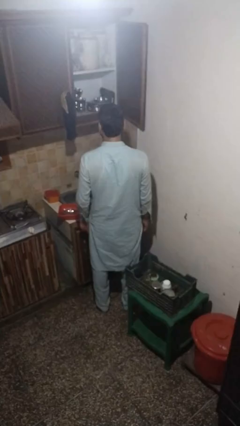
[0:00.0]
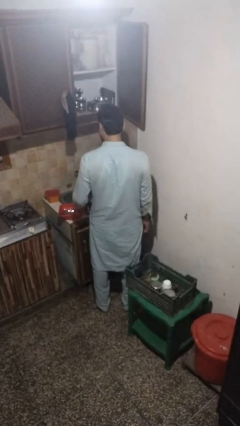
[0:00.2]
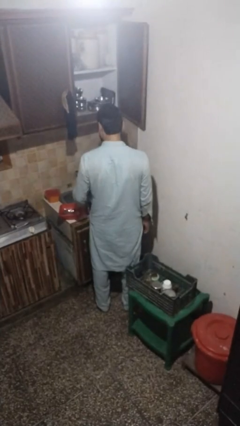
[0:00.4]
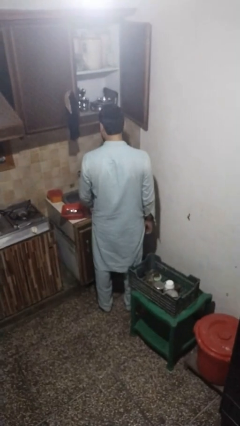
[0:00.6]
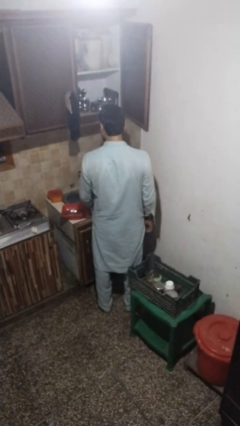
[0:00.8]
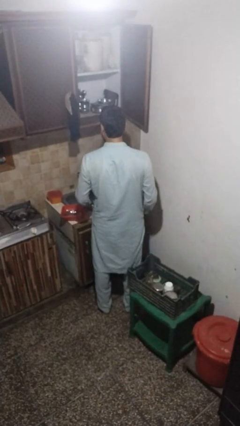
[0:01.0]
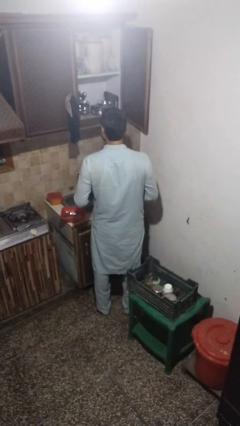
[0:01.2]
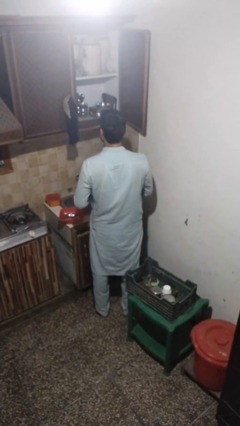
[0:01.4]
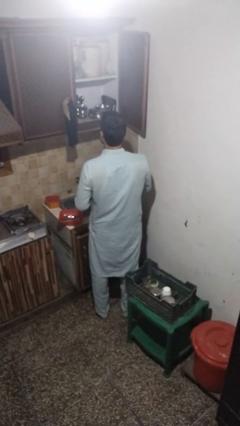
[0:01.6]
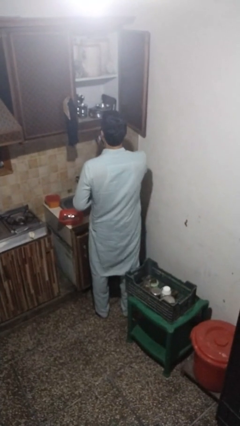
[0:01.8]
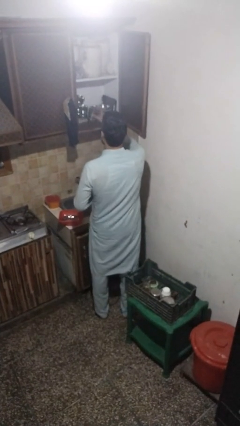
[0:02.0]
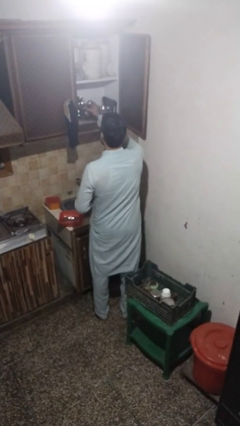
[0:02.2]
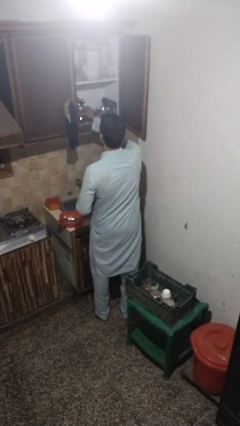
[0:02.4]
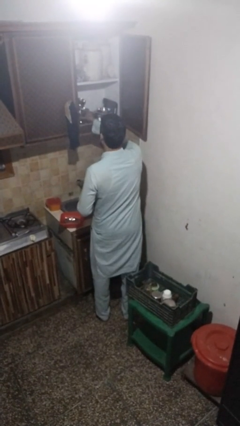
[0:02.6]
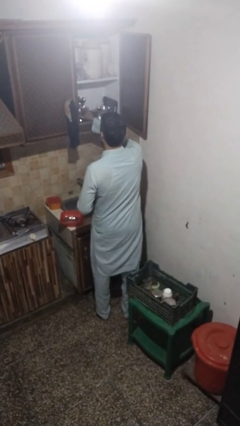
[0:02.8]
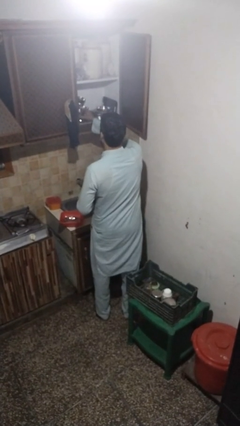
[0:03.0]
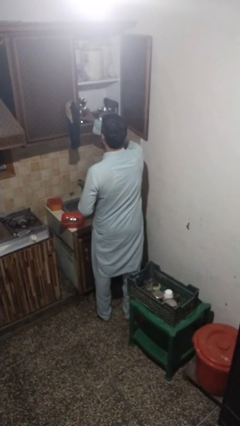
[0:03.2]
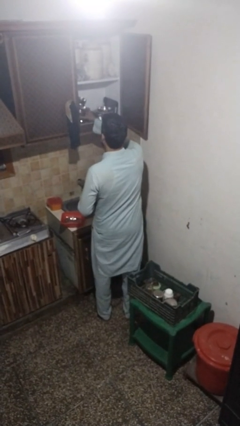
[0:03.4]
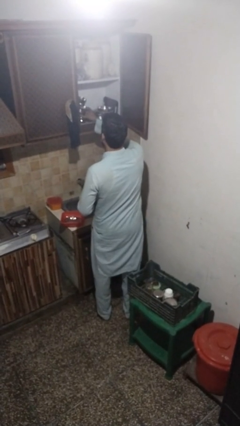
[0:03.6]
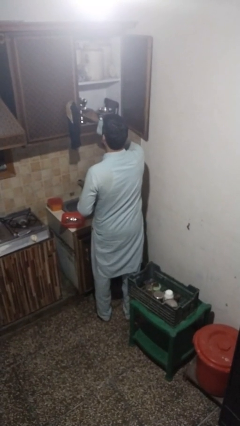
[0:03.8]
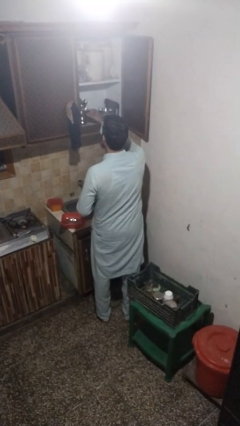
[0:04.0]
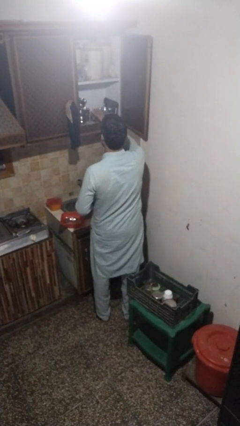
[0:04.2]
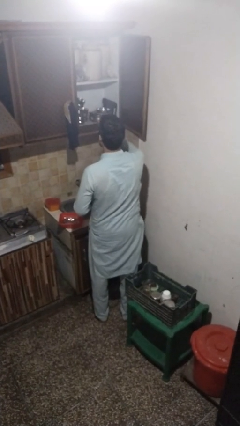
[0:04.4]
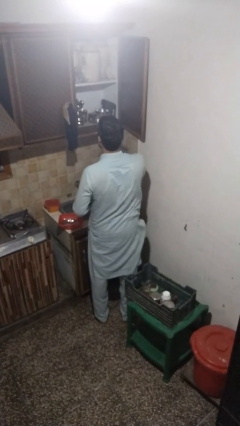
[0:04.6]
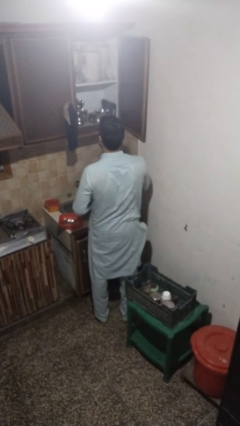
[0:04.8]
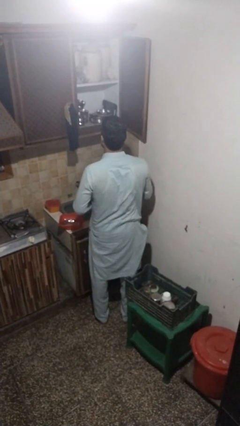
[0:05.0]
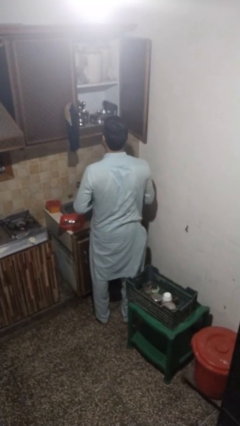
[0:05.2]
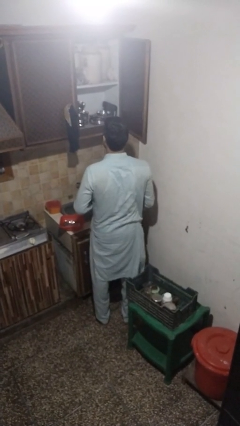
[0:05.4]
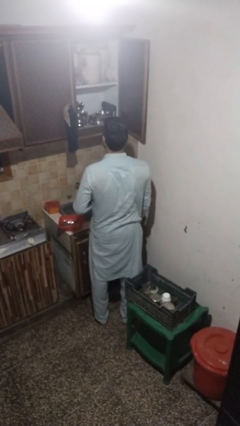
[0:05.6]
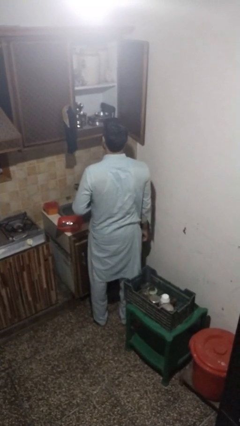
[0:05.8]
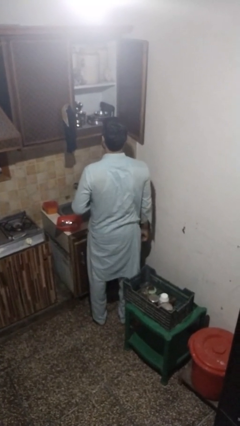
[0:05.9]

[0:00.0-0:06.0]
person puts object in cabinet

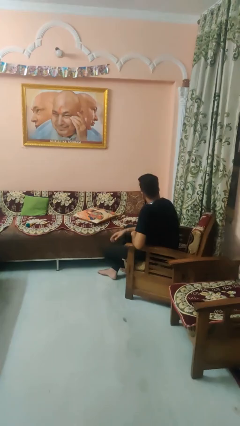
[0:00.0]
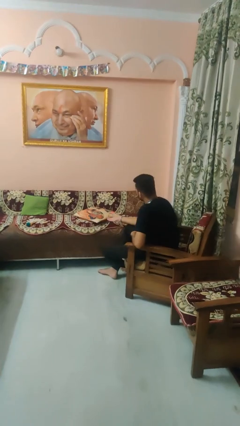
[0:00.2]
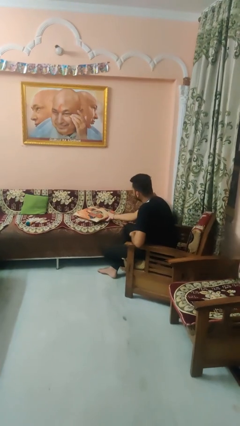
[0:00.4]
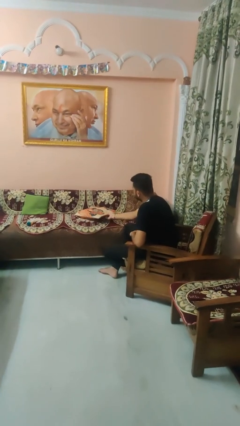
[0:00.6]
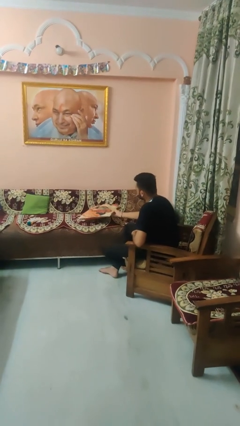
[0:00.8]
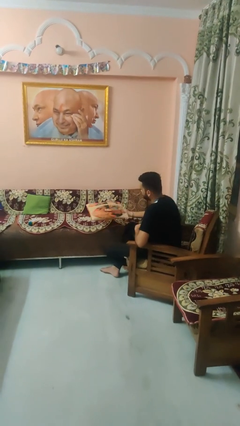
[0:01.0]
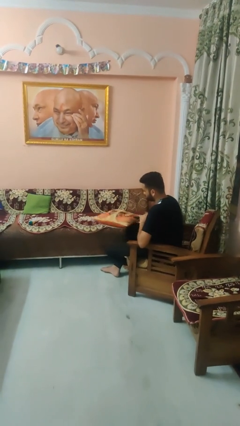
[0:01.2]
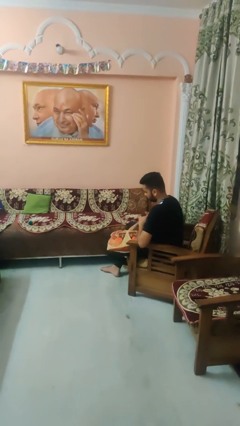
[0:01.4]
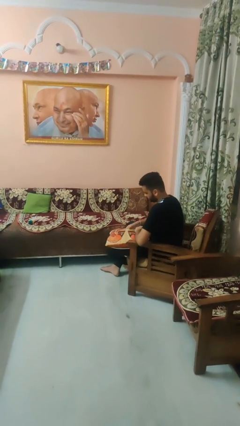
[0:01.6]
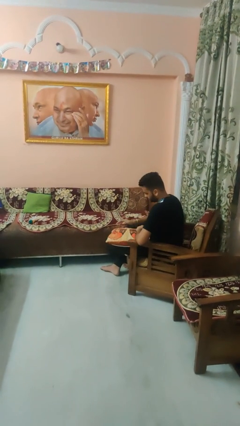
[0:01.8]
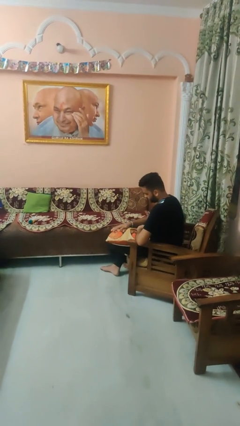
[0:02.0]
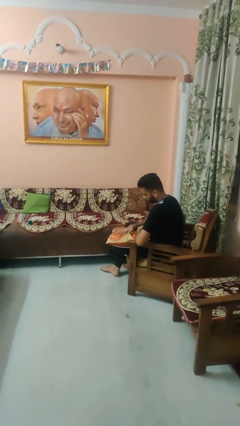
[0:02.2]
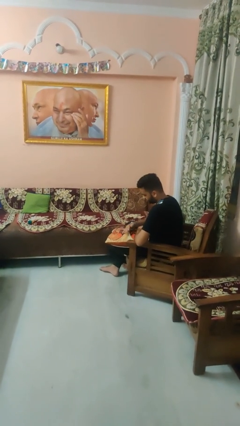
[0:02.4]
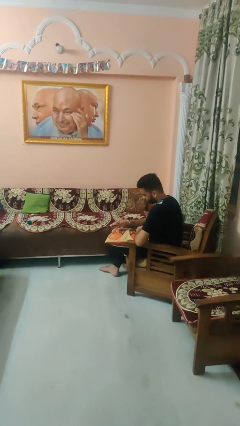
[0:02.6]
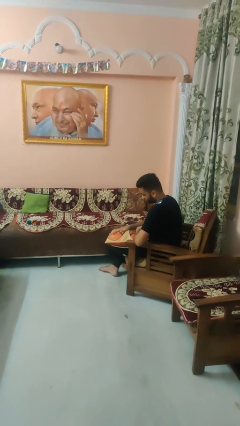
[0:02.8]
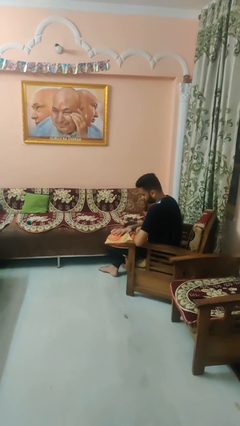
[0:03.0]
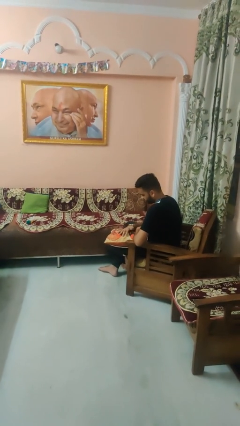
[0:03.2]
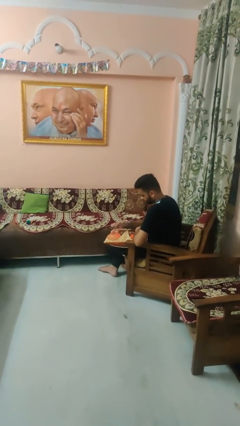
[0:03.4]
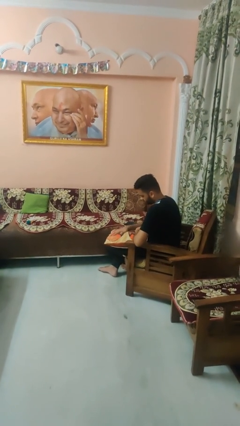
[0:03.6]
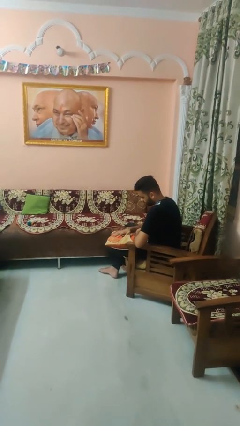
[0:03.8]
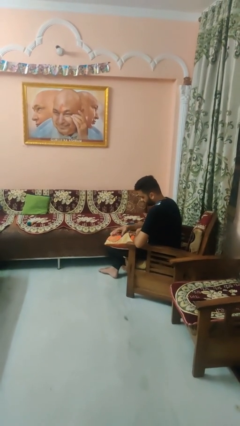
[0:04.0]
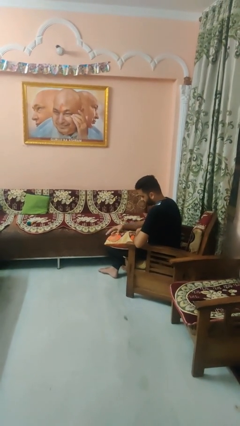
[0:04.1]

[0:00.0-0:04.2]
person waves hand over object

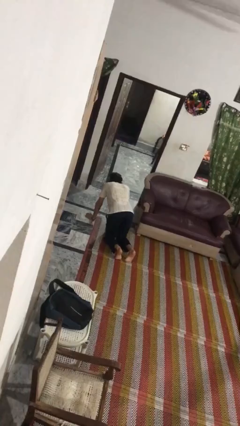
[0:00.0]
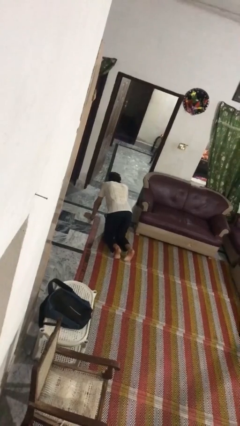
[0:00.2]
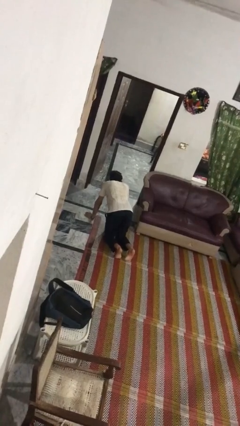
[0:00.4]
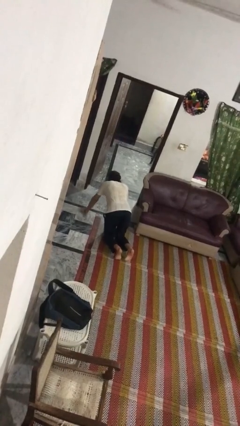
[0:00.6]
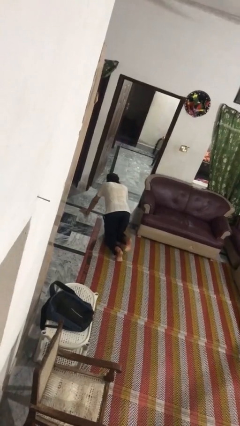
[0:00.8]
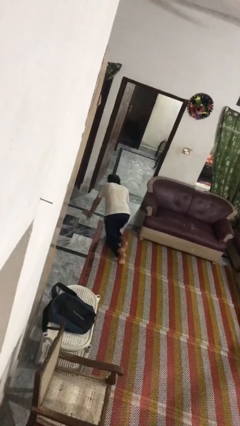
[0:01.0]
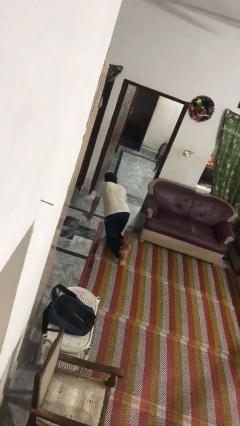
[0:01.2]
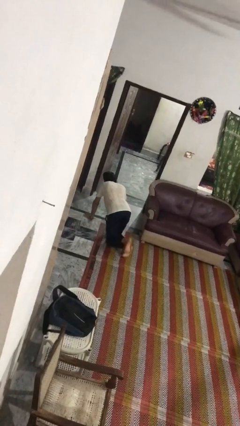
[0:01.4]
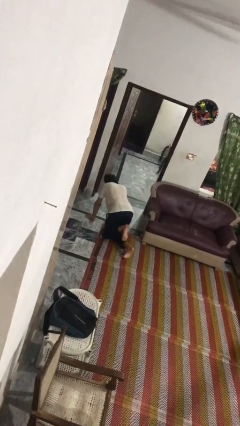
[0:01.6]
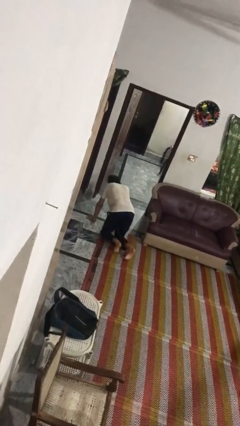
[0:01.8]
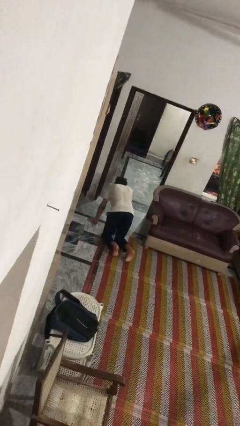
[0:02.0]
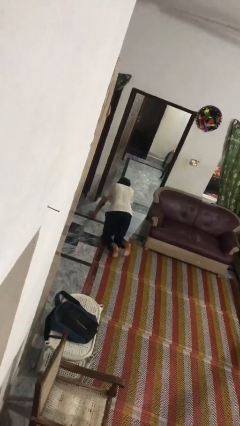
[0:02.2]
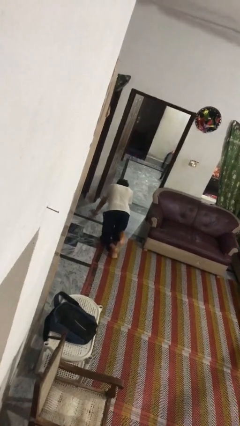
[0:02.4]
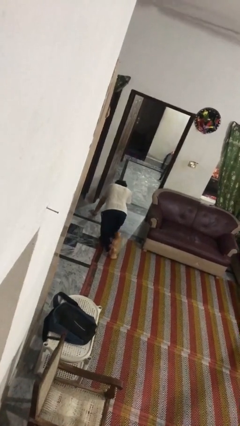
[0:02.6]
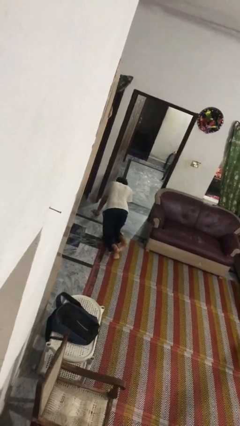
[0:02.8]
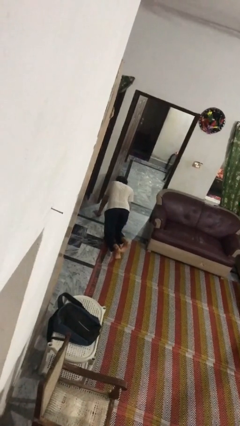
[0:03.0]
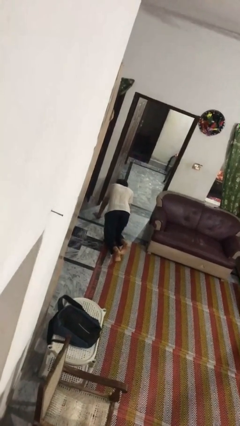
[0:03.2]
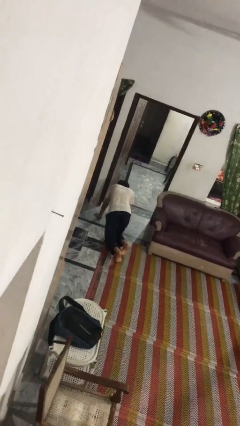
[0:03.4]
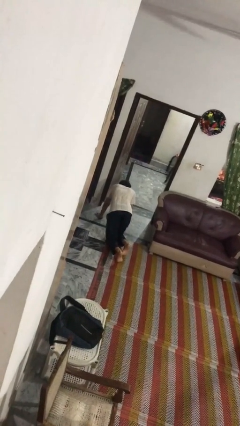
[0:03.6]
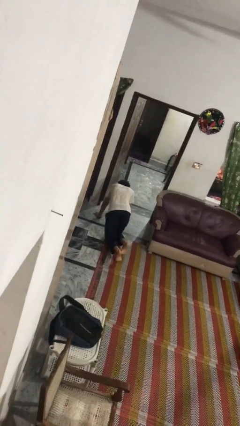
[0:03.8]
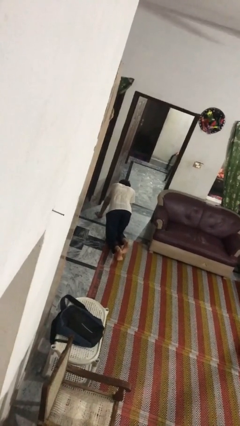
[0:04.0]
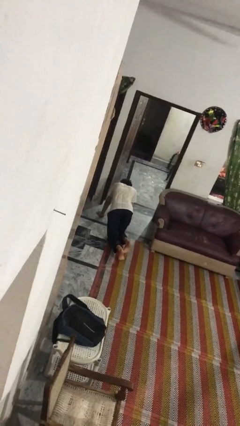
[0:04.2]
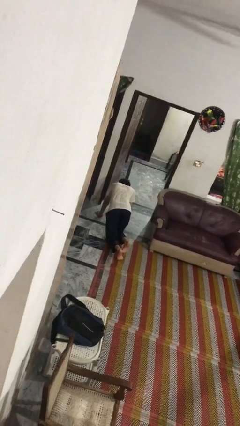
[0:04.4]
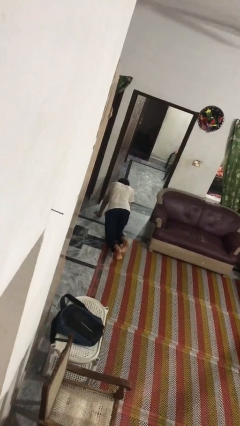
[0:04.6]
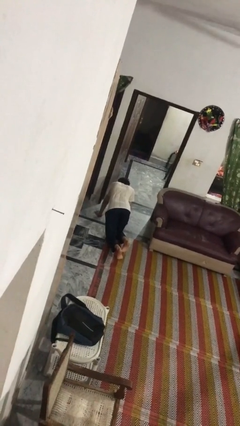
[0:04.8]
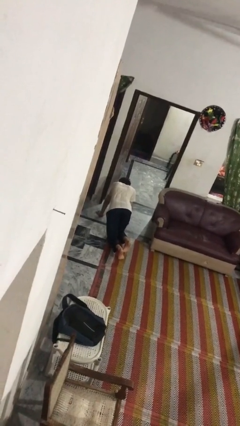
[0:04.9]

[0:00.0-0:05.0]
person crawls

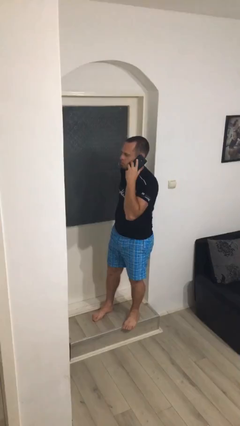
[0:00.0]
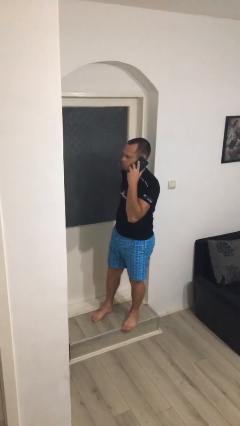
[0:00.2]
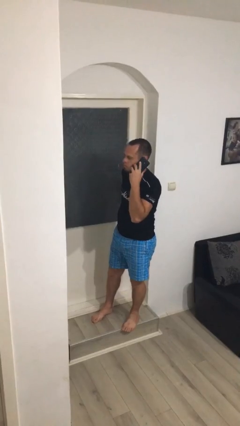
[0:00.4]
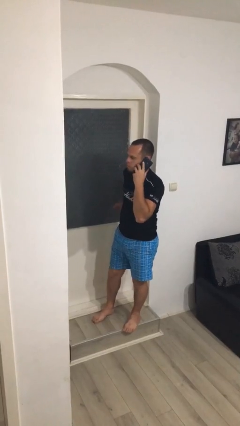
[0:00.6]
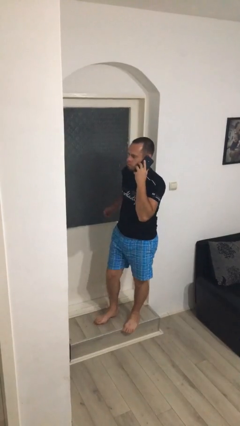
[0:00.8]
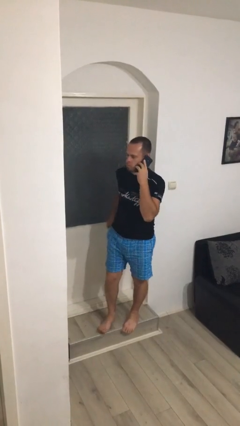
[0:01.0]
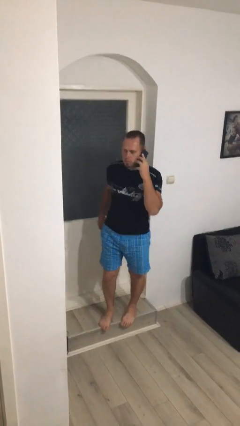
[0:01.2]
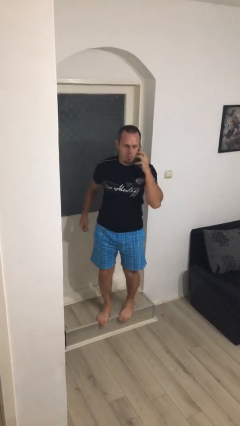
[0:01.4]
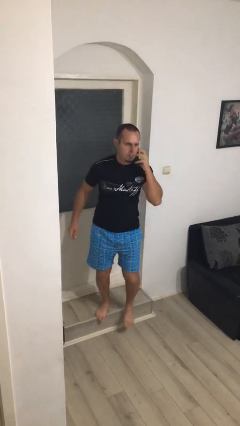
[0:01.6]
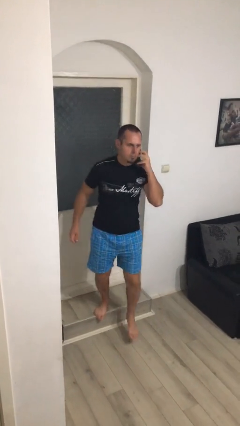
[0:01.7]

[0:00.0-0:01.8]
person closes facility door

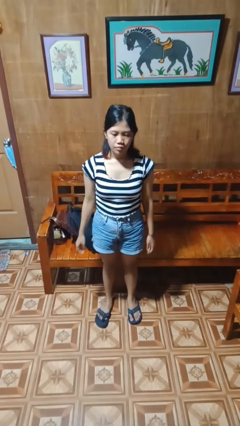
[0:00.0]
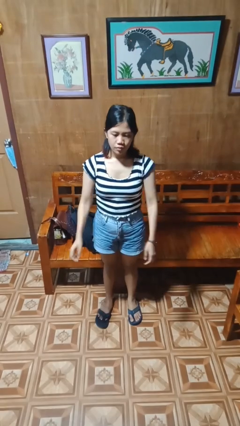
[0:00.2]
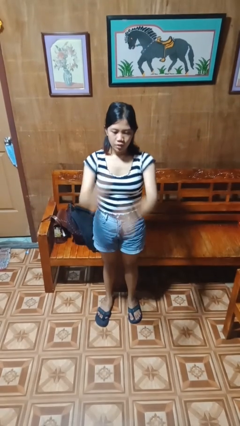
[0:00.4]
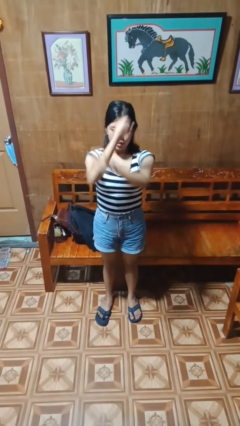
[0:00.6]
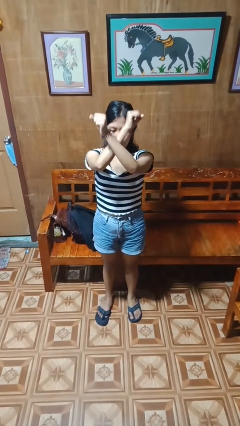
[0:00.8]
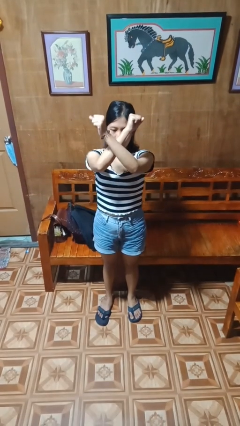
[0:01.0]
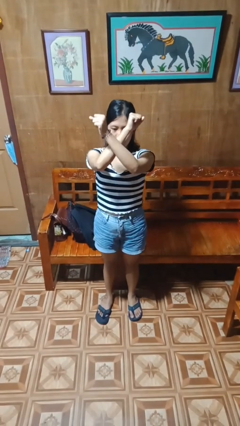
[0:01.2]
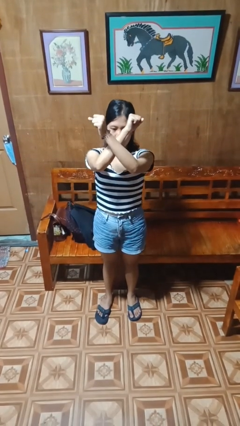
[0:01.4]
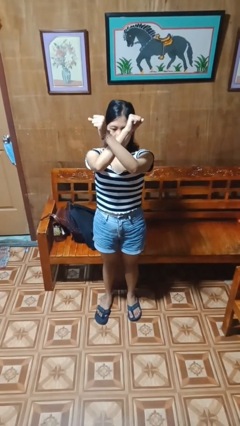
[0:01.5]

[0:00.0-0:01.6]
person gestures arms x
